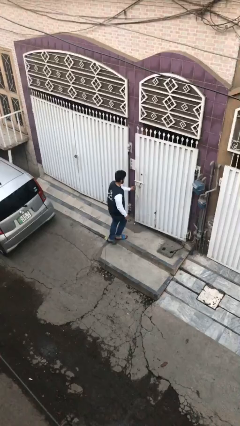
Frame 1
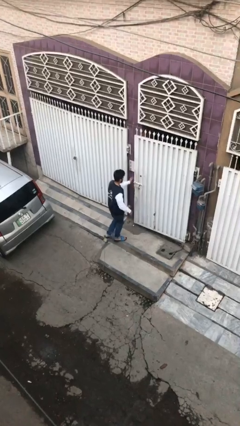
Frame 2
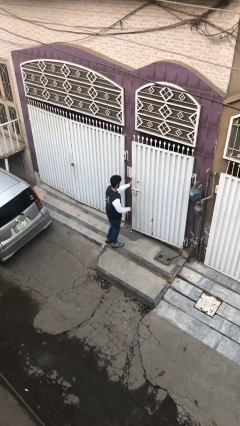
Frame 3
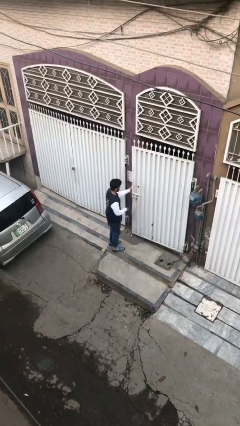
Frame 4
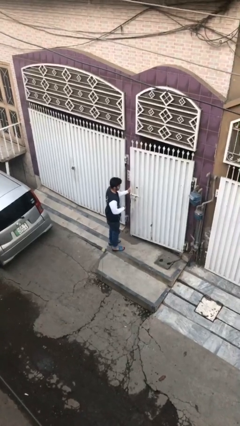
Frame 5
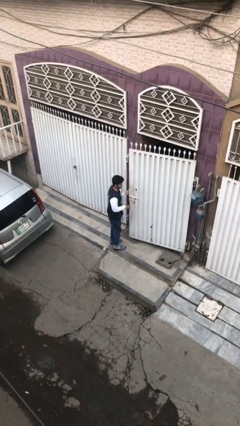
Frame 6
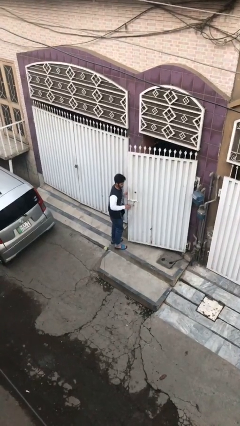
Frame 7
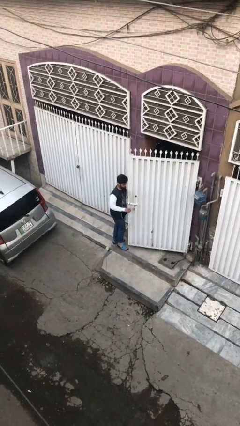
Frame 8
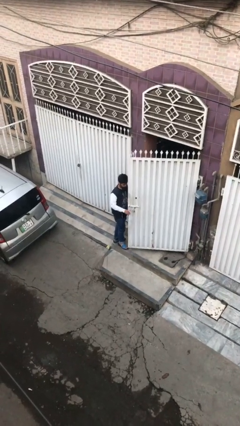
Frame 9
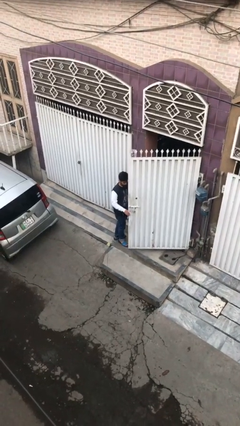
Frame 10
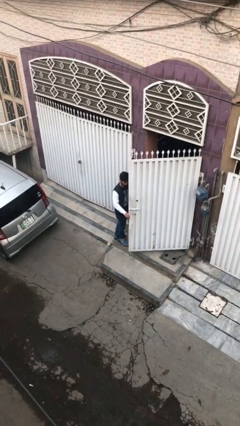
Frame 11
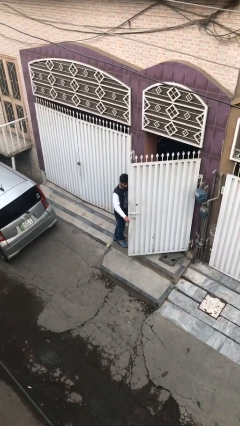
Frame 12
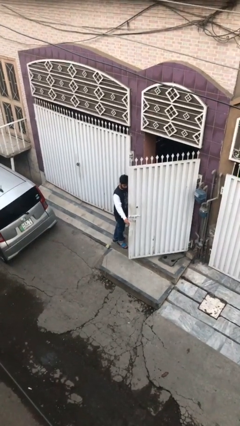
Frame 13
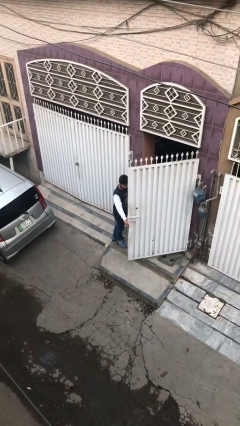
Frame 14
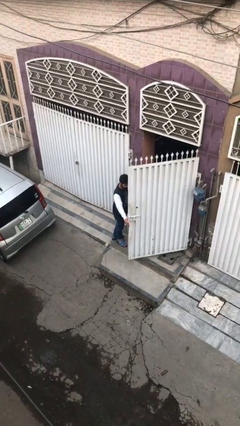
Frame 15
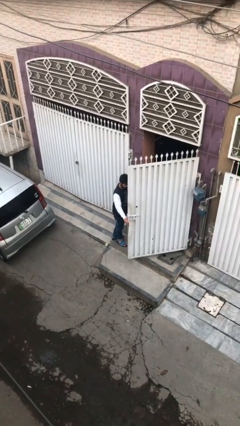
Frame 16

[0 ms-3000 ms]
person opens facility door

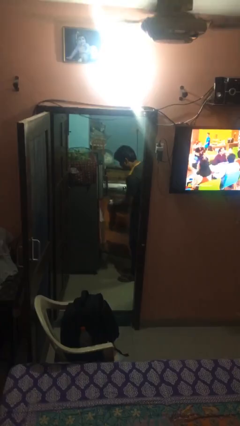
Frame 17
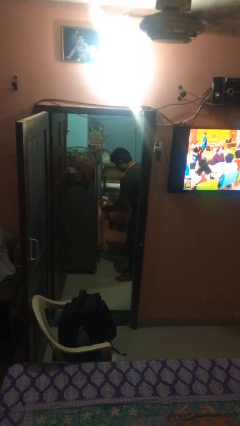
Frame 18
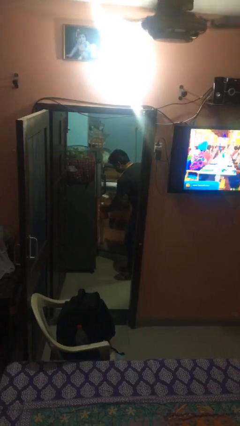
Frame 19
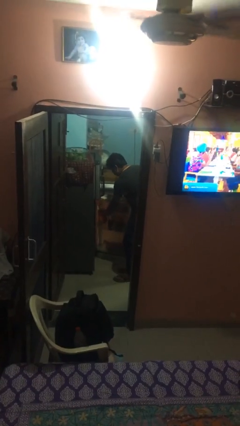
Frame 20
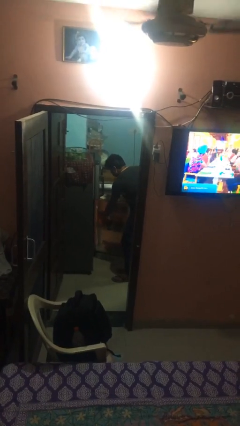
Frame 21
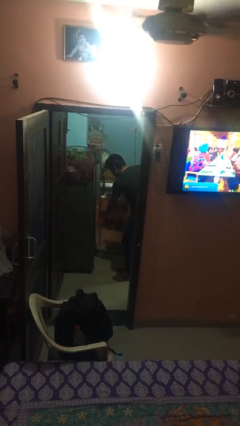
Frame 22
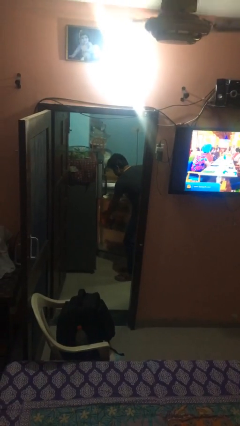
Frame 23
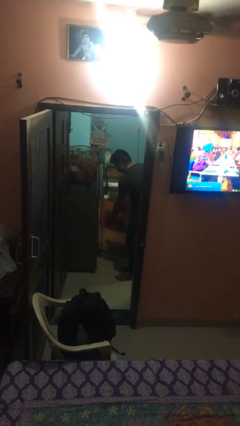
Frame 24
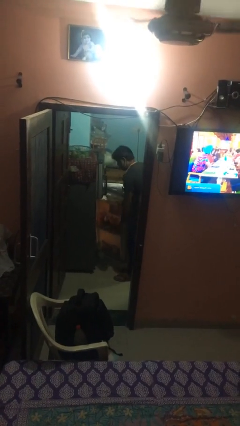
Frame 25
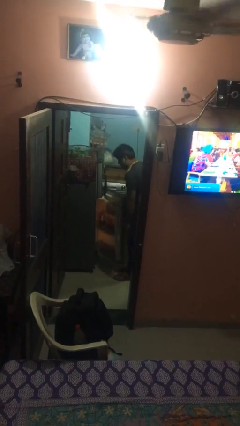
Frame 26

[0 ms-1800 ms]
person puts object into refrigerator

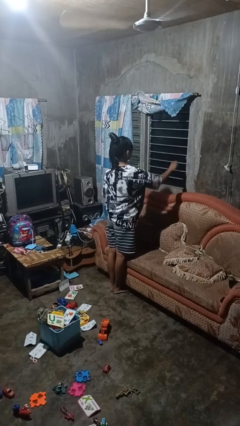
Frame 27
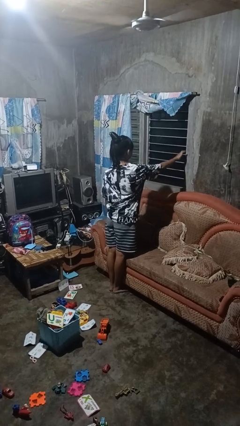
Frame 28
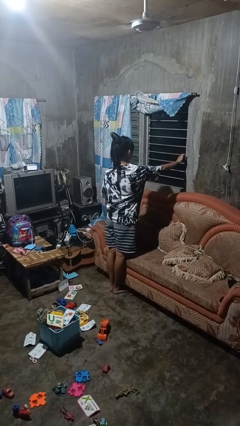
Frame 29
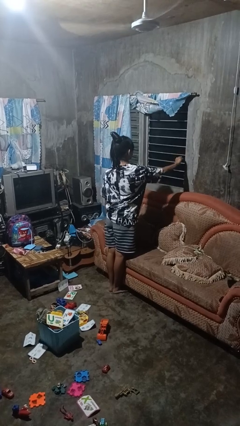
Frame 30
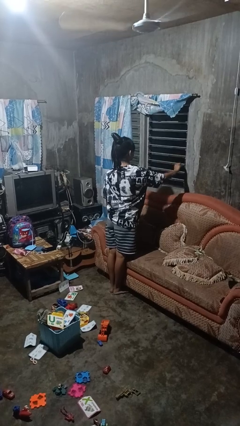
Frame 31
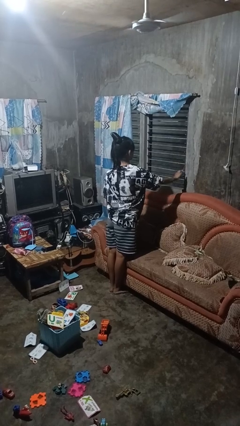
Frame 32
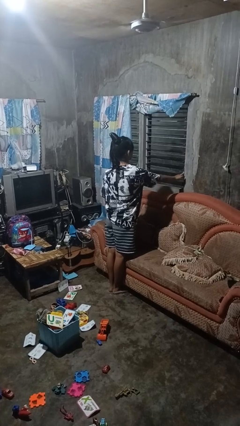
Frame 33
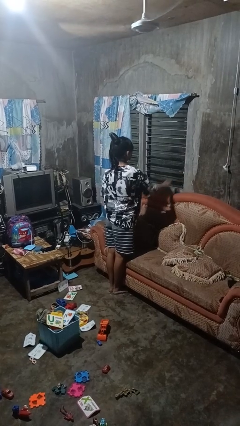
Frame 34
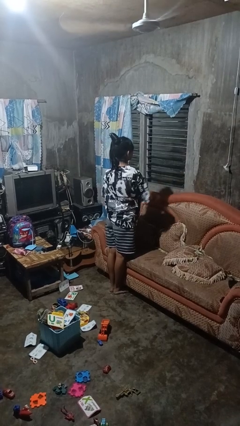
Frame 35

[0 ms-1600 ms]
person opens home window

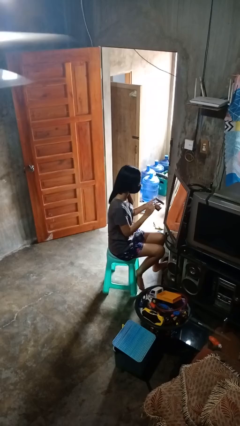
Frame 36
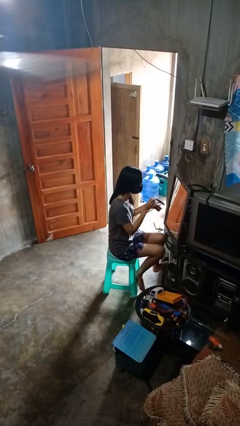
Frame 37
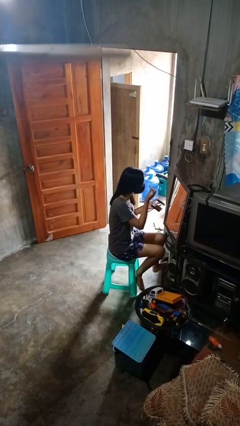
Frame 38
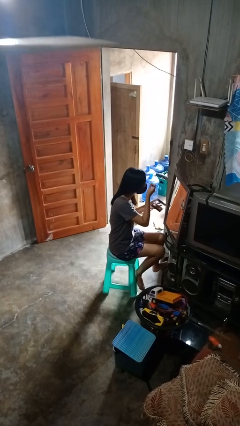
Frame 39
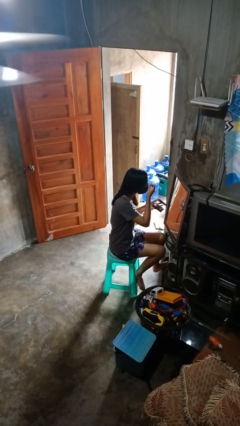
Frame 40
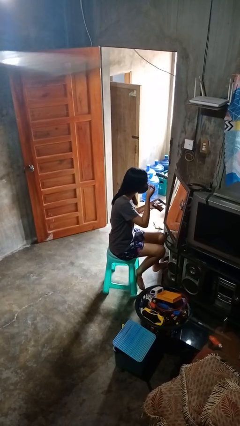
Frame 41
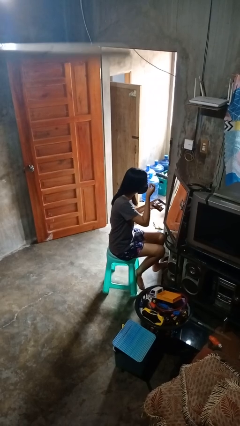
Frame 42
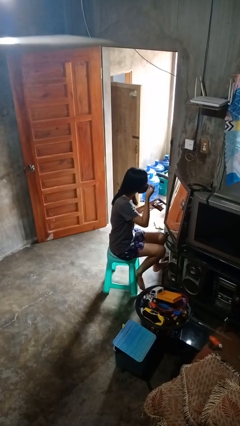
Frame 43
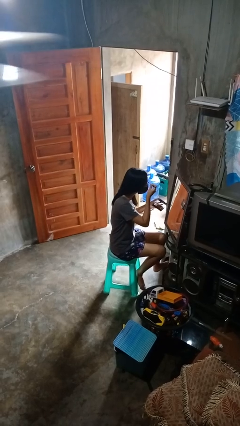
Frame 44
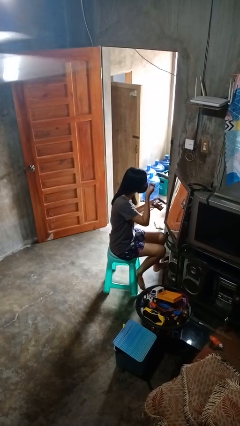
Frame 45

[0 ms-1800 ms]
person applies eye makeup

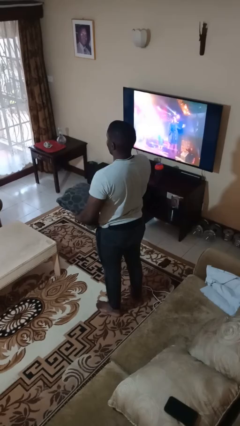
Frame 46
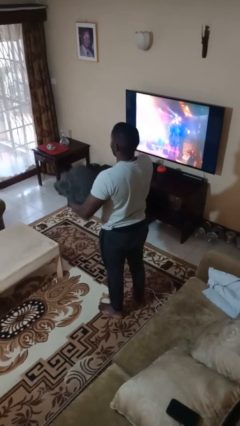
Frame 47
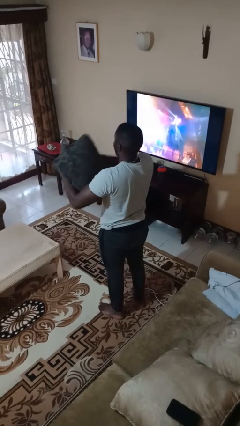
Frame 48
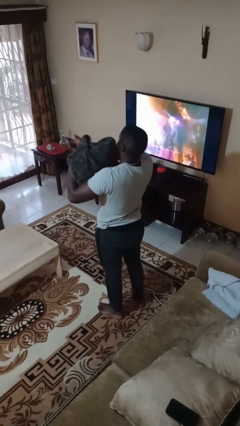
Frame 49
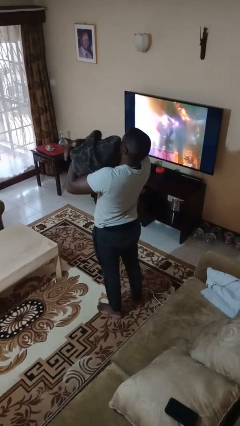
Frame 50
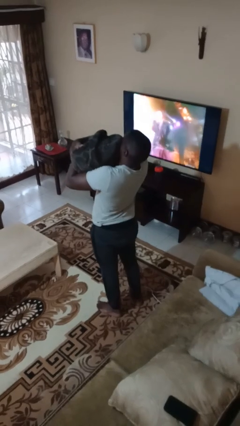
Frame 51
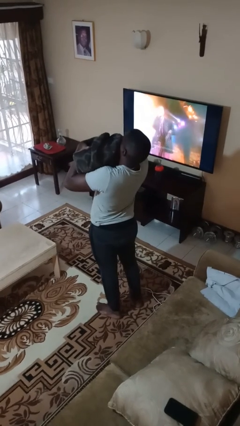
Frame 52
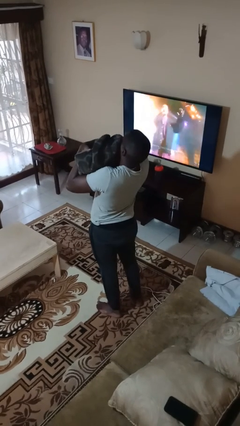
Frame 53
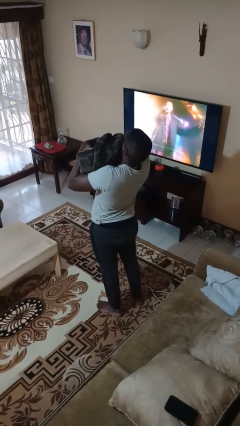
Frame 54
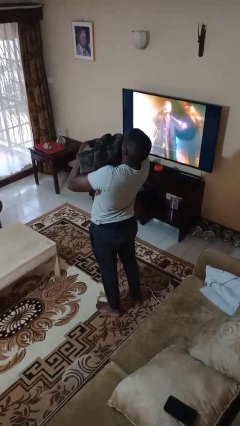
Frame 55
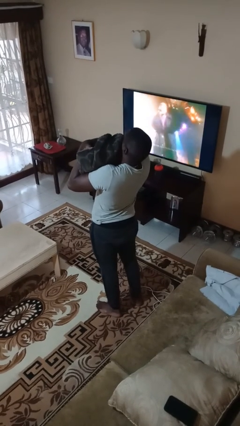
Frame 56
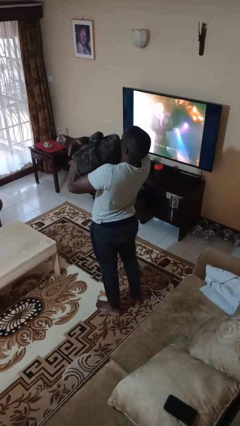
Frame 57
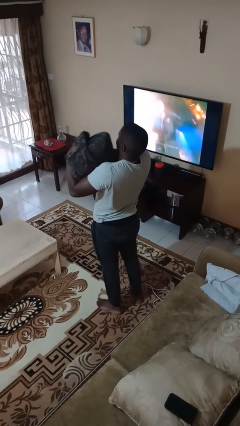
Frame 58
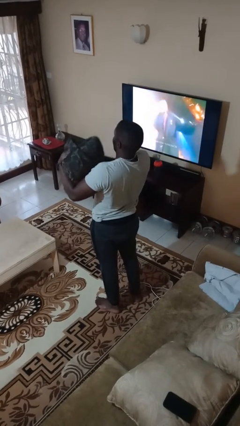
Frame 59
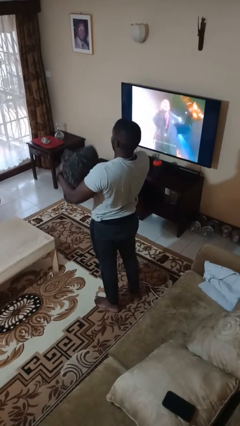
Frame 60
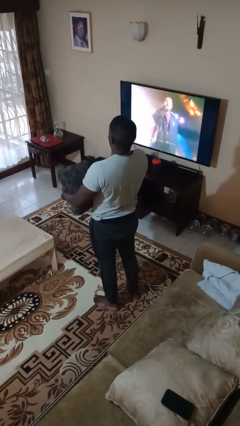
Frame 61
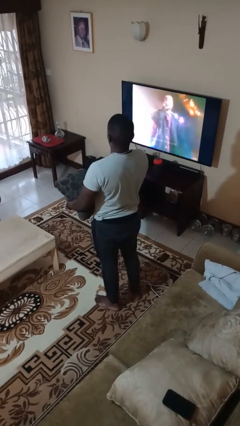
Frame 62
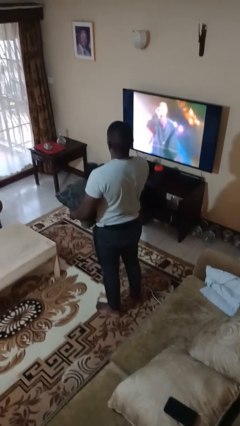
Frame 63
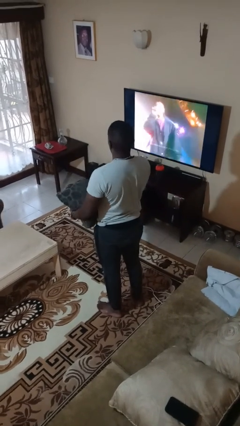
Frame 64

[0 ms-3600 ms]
person hugs stuffed animal

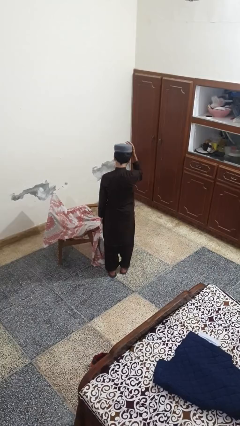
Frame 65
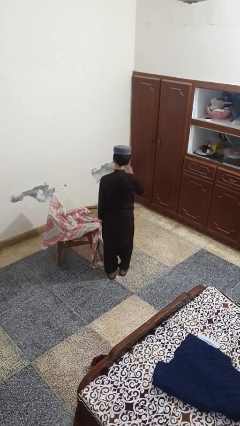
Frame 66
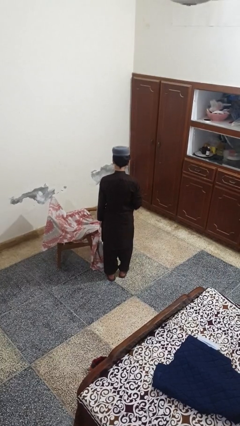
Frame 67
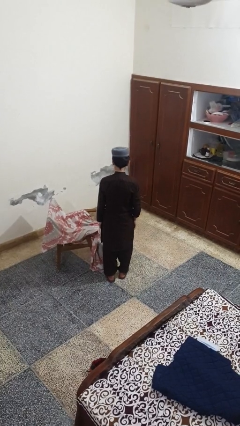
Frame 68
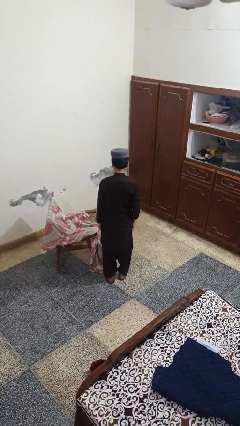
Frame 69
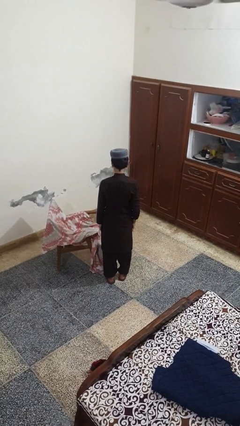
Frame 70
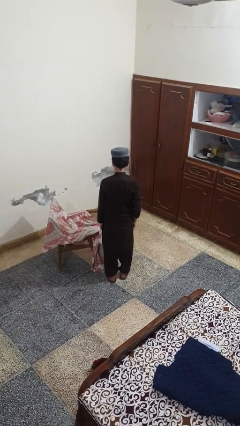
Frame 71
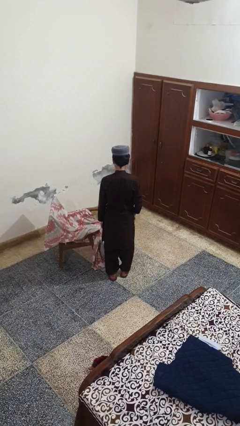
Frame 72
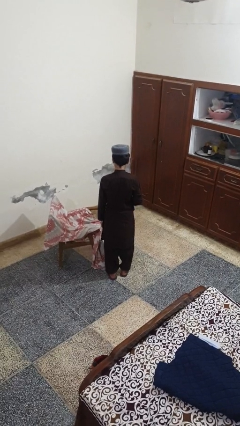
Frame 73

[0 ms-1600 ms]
person puts on hat

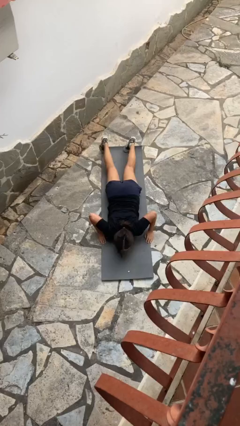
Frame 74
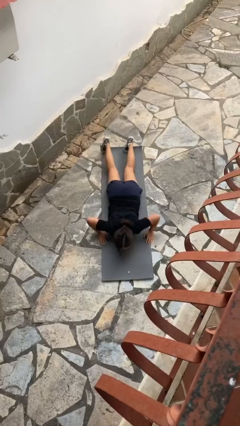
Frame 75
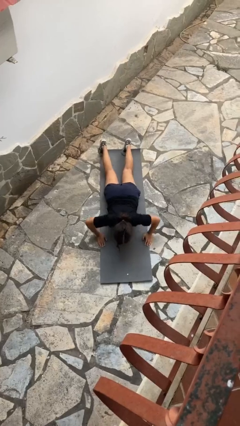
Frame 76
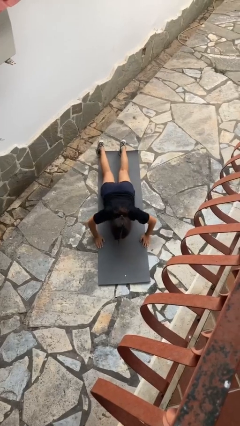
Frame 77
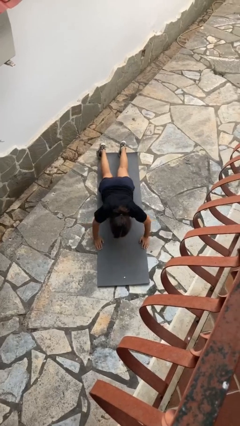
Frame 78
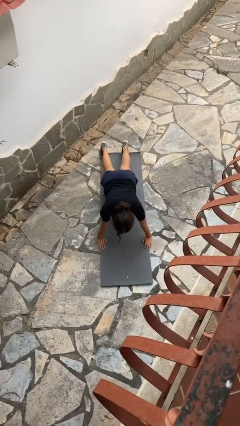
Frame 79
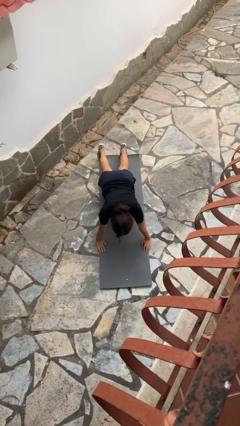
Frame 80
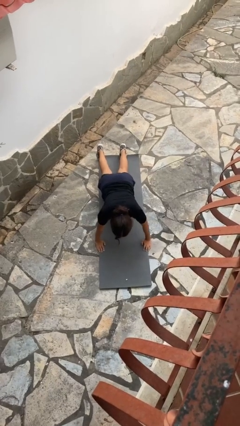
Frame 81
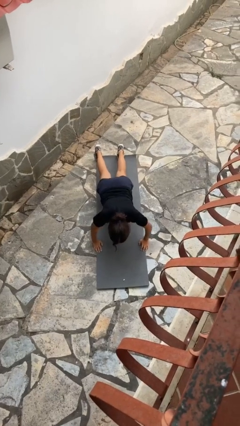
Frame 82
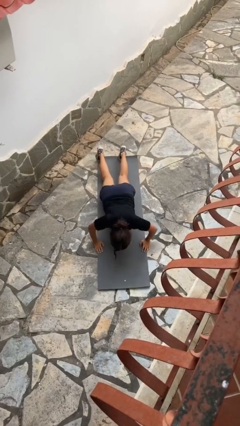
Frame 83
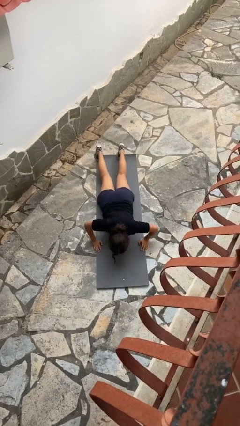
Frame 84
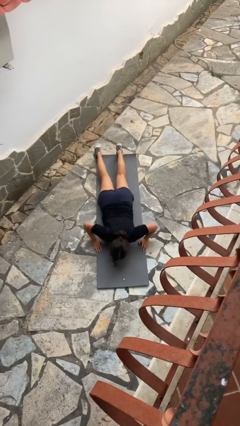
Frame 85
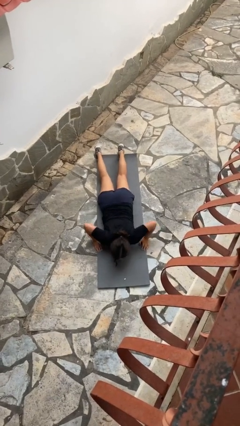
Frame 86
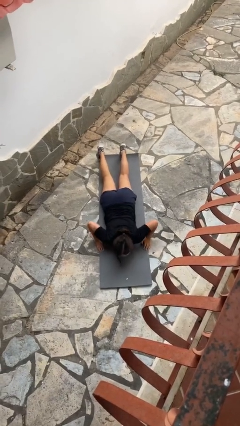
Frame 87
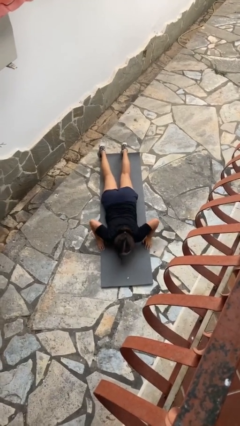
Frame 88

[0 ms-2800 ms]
person exercises with pushup

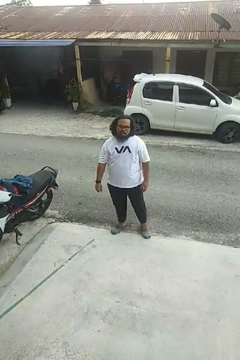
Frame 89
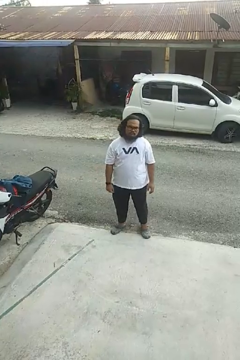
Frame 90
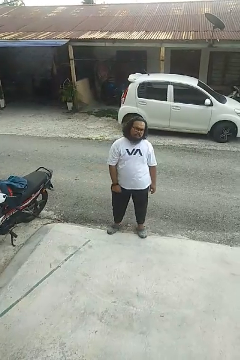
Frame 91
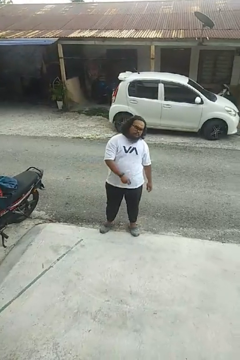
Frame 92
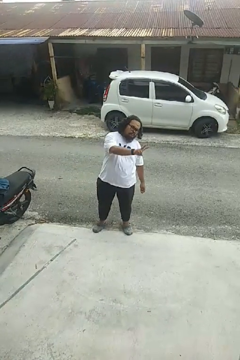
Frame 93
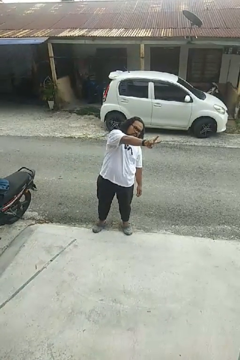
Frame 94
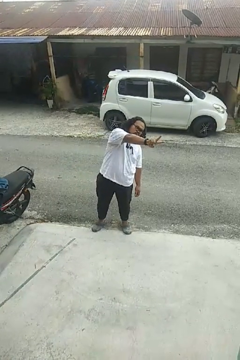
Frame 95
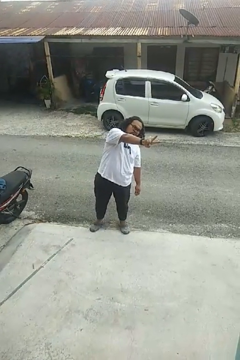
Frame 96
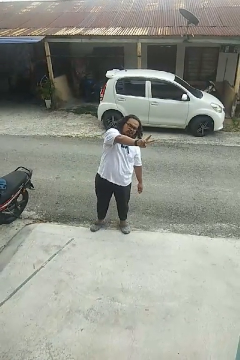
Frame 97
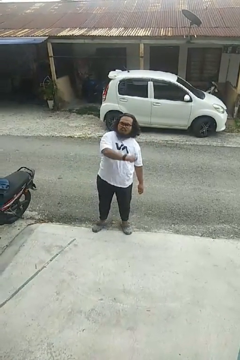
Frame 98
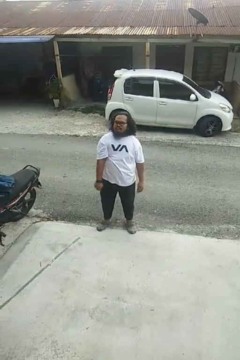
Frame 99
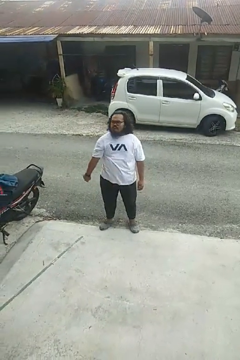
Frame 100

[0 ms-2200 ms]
person gestures peace
